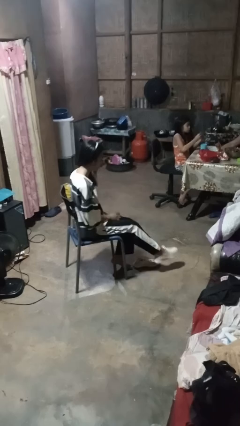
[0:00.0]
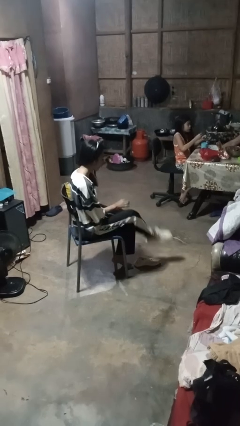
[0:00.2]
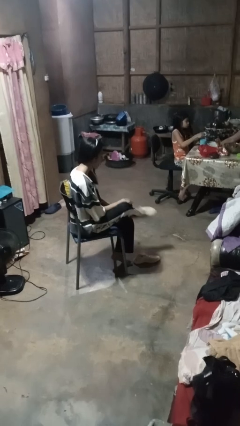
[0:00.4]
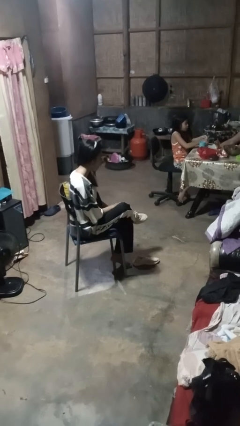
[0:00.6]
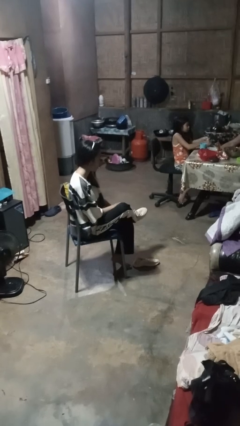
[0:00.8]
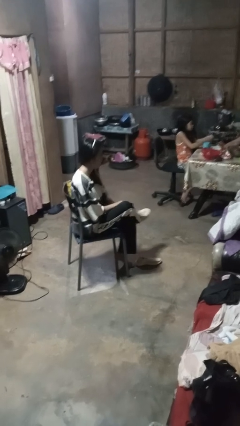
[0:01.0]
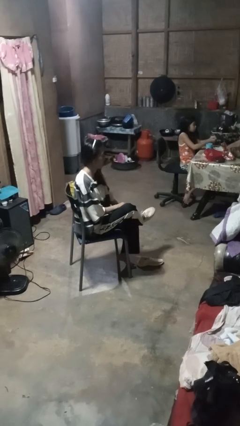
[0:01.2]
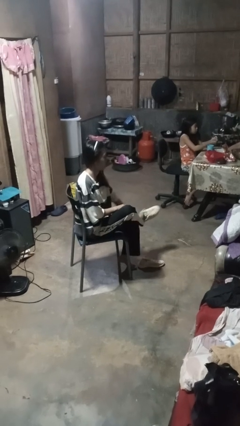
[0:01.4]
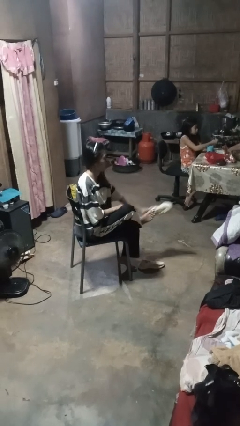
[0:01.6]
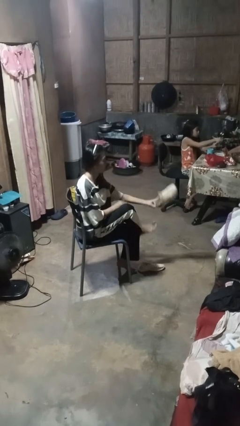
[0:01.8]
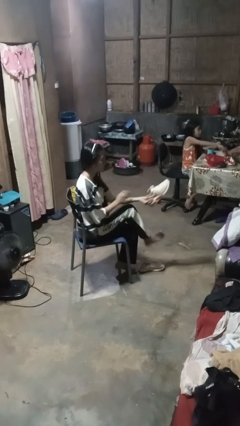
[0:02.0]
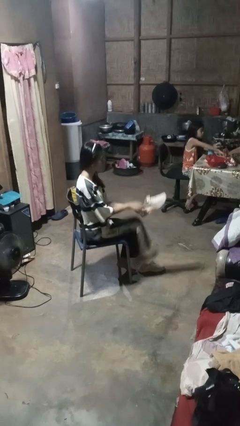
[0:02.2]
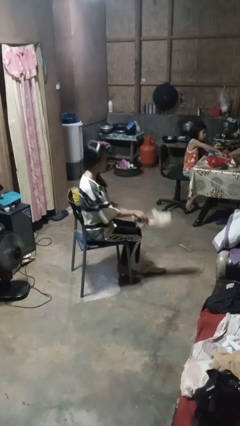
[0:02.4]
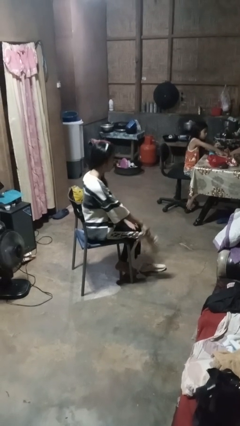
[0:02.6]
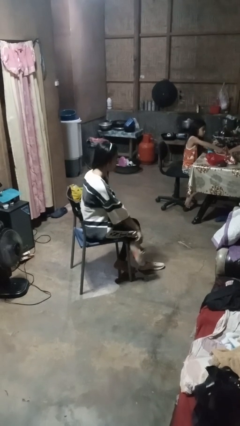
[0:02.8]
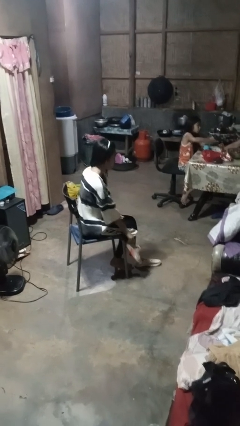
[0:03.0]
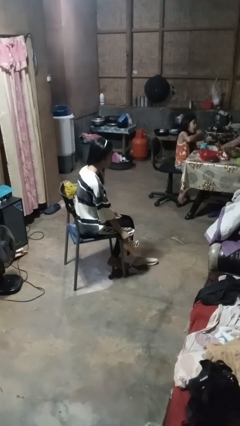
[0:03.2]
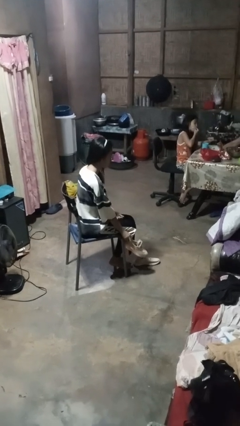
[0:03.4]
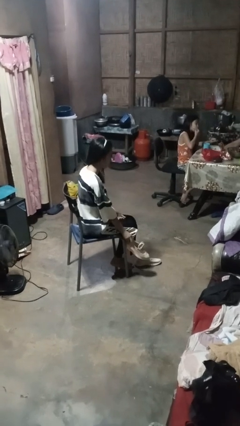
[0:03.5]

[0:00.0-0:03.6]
person takes off shoes

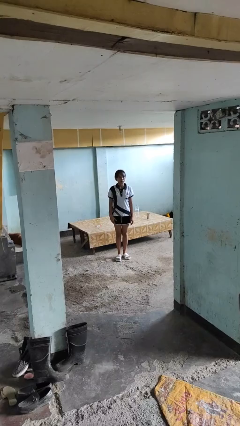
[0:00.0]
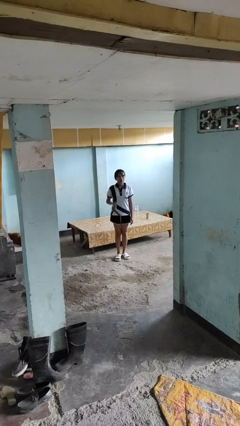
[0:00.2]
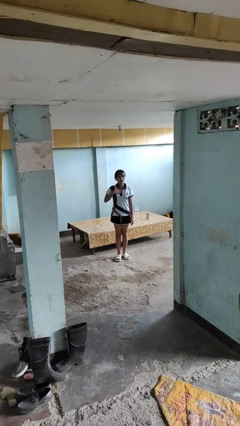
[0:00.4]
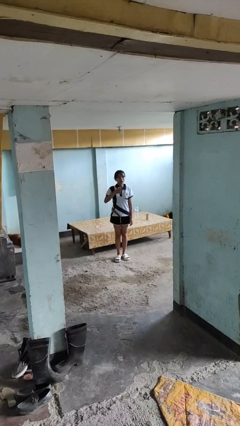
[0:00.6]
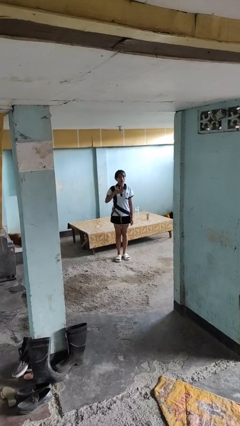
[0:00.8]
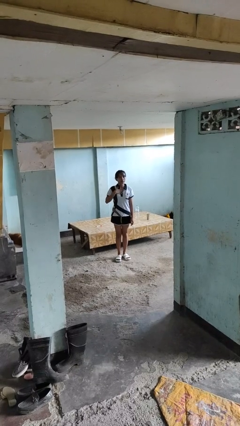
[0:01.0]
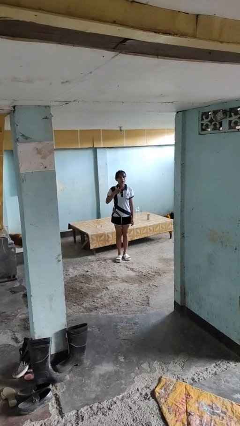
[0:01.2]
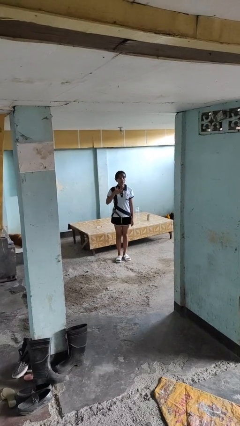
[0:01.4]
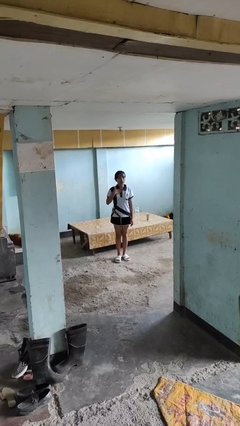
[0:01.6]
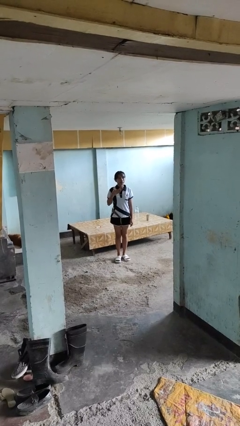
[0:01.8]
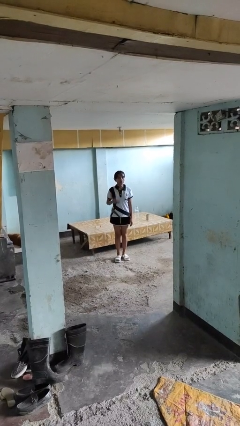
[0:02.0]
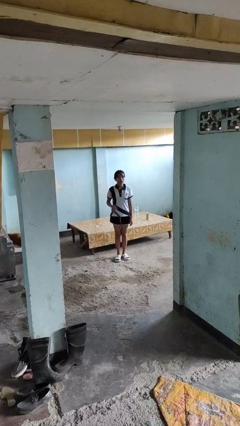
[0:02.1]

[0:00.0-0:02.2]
person drums on chest

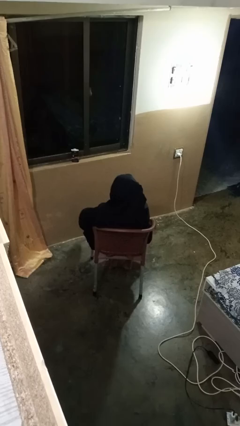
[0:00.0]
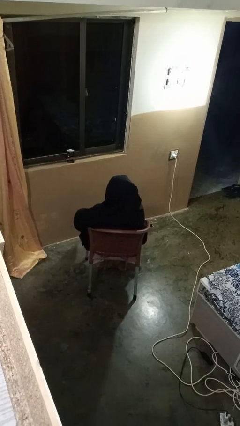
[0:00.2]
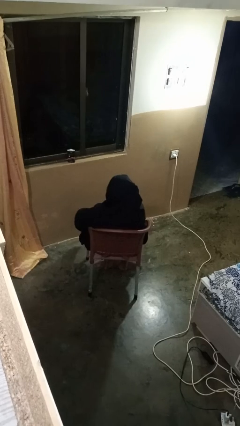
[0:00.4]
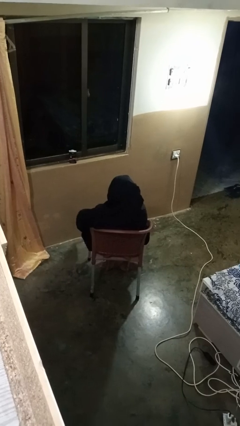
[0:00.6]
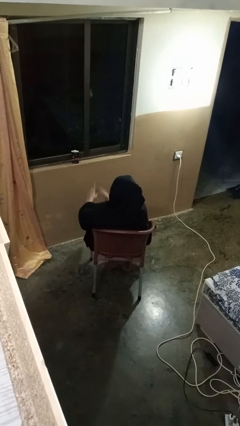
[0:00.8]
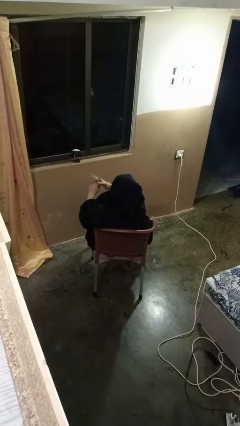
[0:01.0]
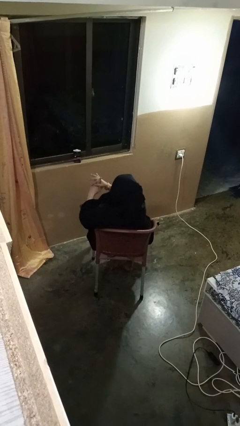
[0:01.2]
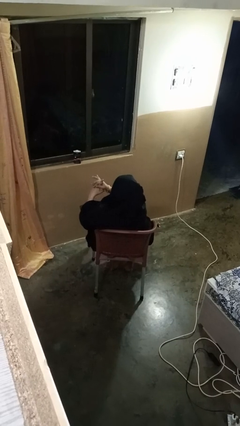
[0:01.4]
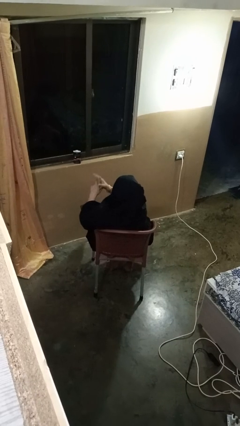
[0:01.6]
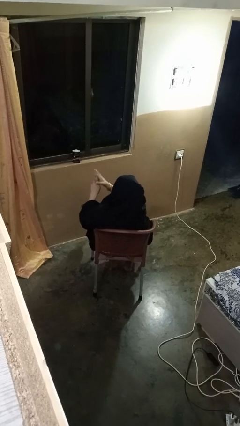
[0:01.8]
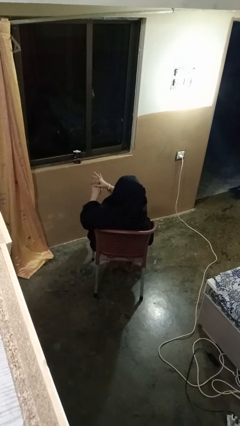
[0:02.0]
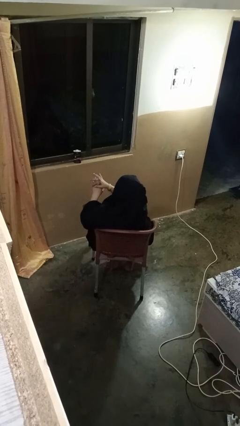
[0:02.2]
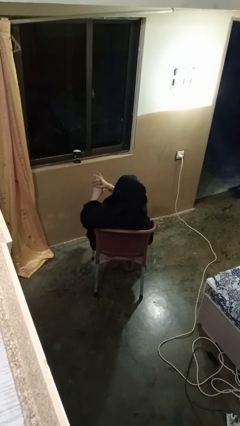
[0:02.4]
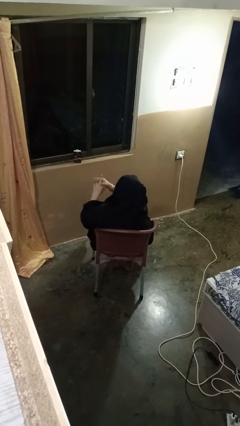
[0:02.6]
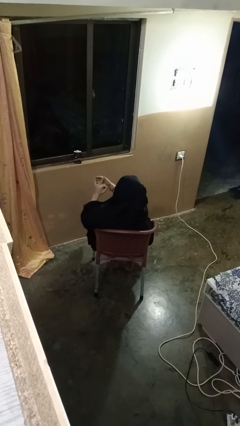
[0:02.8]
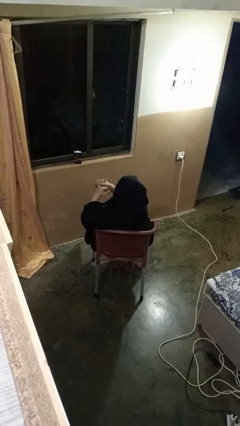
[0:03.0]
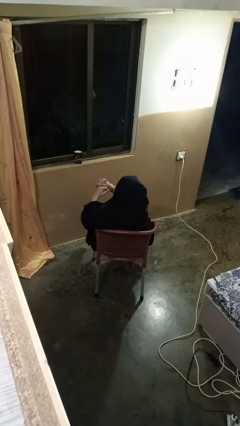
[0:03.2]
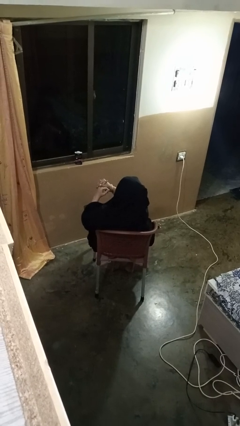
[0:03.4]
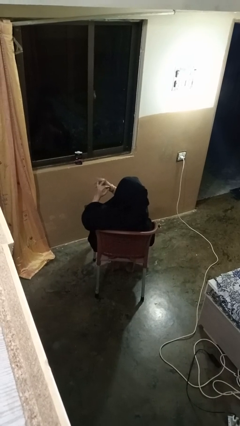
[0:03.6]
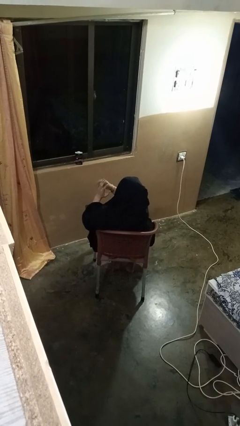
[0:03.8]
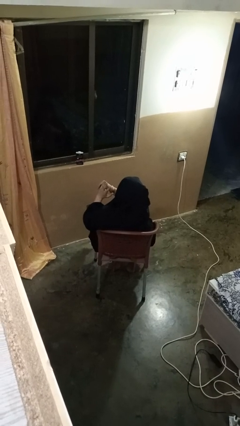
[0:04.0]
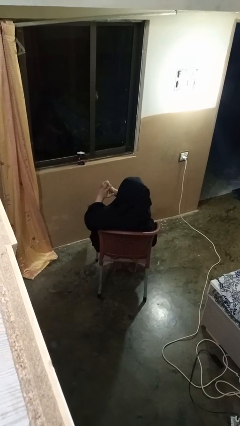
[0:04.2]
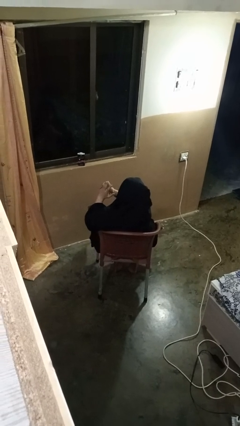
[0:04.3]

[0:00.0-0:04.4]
person cracks knuckles

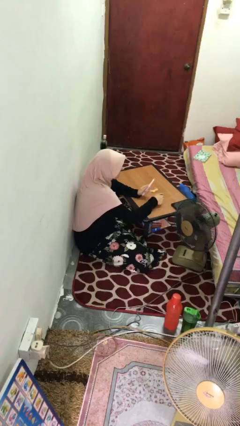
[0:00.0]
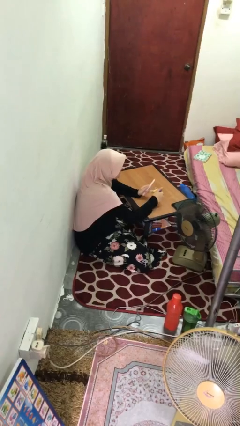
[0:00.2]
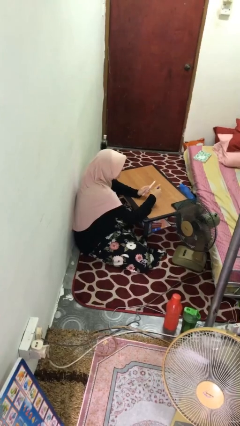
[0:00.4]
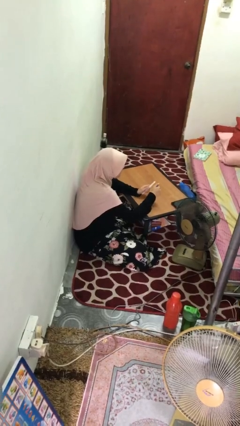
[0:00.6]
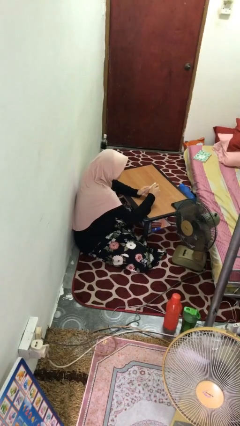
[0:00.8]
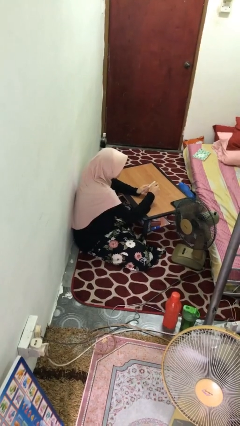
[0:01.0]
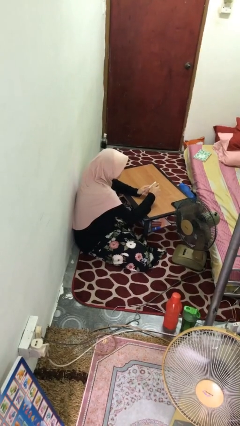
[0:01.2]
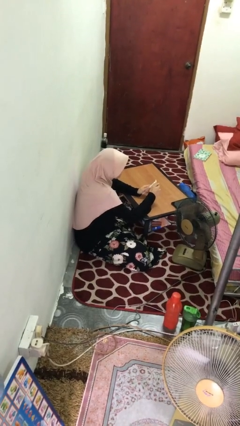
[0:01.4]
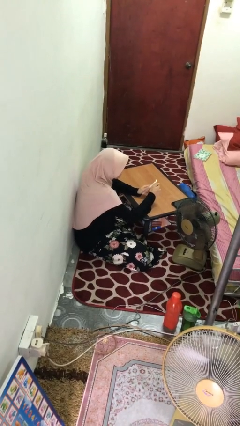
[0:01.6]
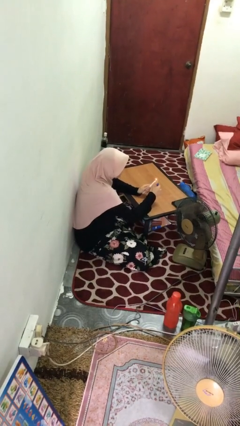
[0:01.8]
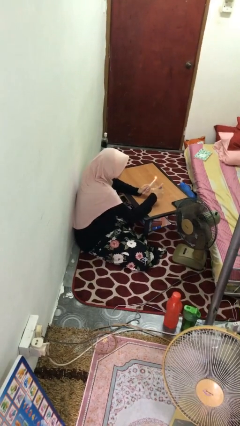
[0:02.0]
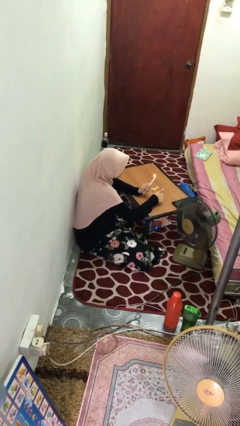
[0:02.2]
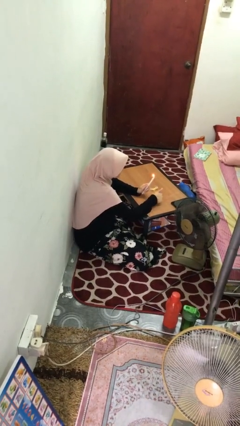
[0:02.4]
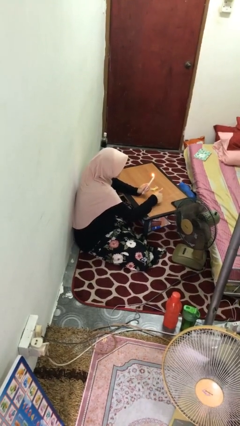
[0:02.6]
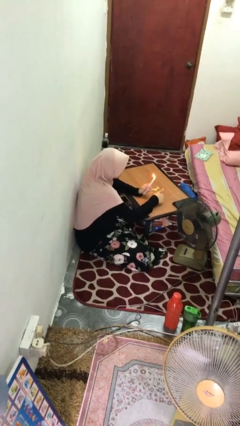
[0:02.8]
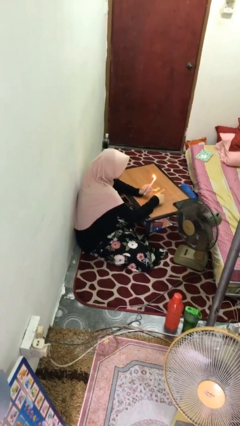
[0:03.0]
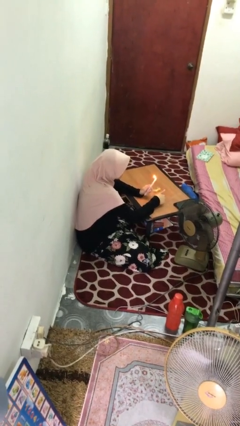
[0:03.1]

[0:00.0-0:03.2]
person lights candle

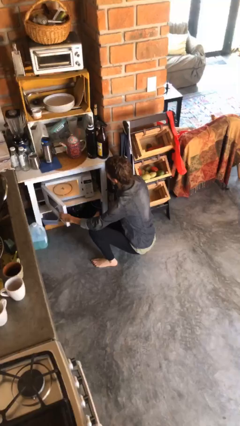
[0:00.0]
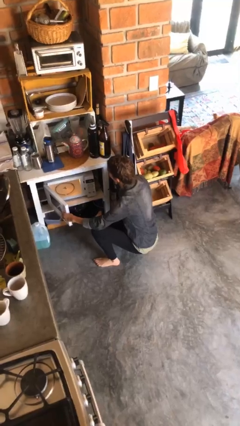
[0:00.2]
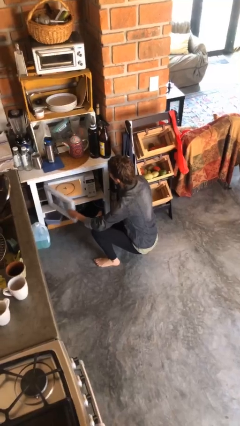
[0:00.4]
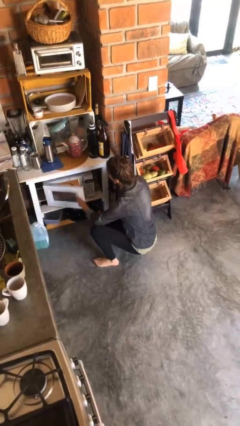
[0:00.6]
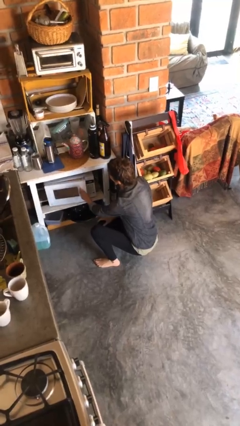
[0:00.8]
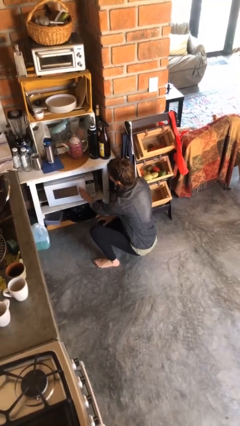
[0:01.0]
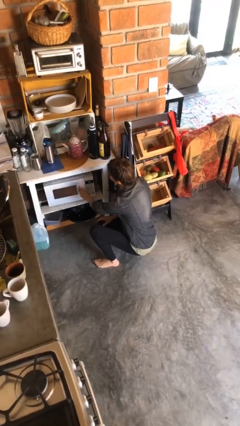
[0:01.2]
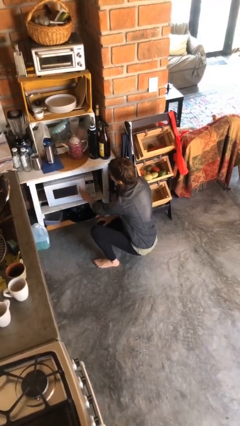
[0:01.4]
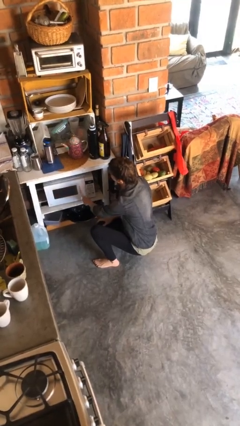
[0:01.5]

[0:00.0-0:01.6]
person closes microwave

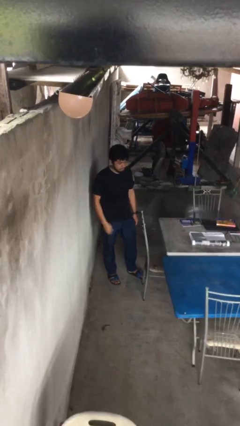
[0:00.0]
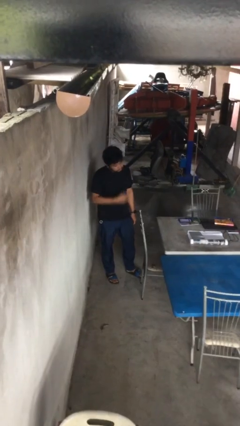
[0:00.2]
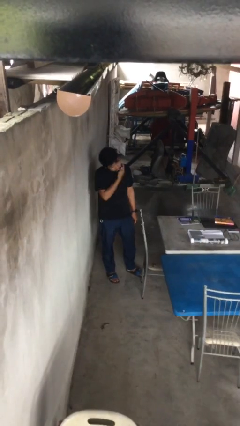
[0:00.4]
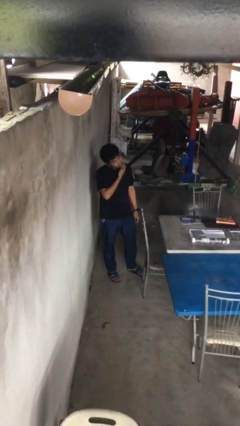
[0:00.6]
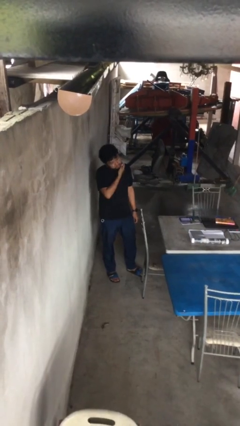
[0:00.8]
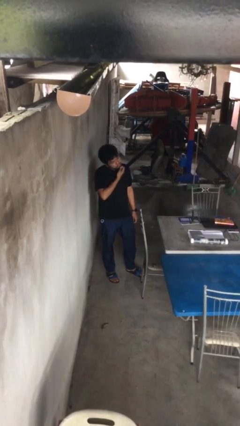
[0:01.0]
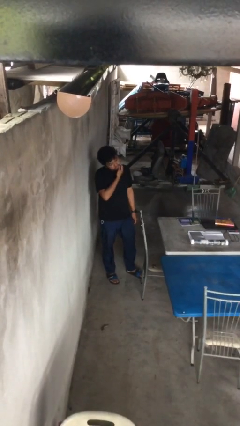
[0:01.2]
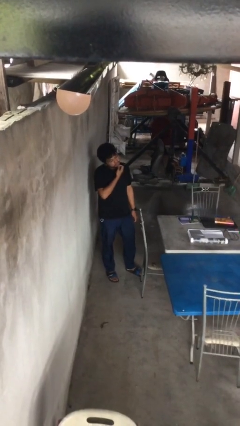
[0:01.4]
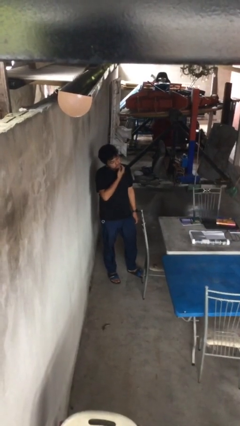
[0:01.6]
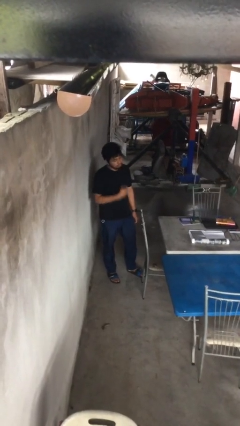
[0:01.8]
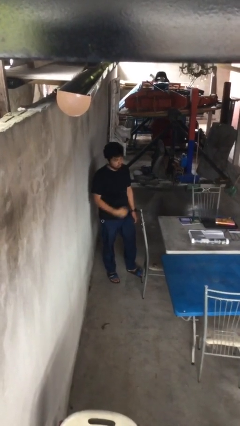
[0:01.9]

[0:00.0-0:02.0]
person scratches face

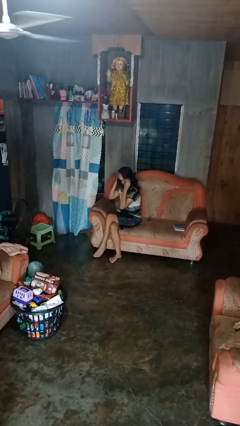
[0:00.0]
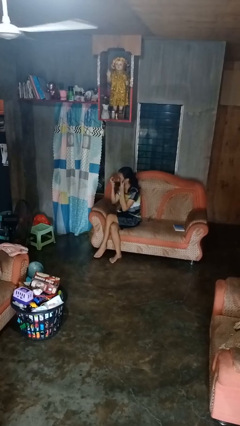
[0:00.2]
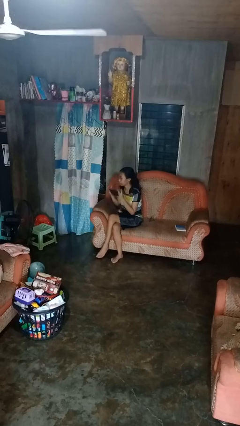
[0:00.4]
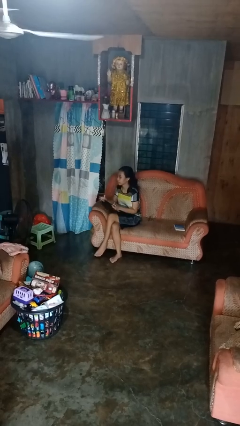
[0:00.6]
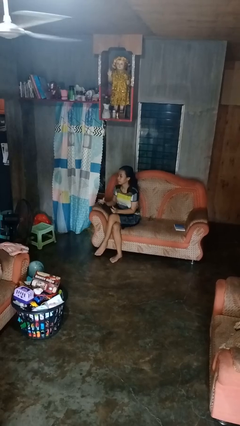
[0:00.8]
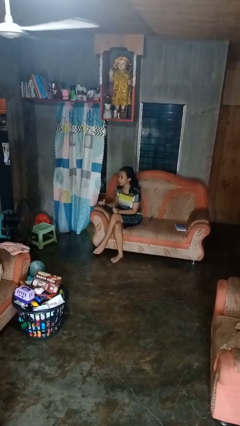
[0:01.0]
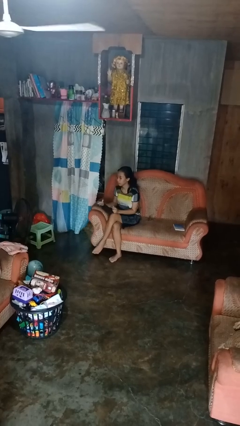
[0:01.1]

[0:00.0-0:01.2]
person takes off facemask
